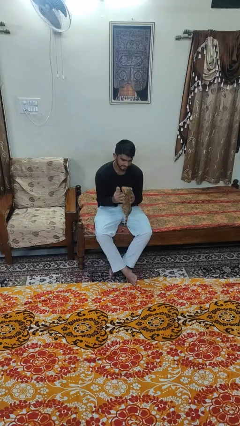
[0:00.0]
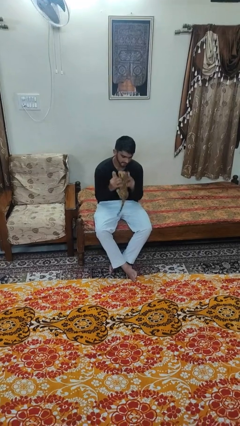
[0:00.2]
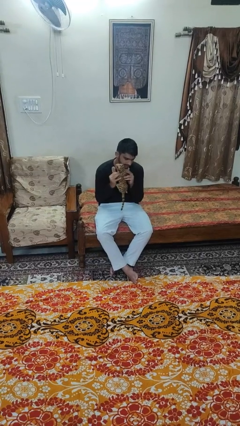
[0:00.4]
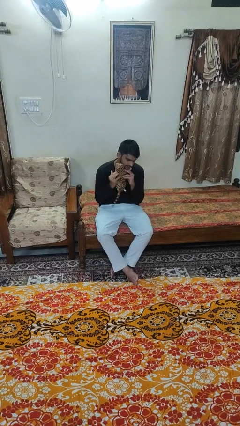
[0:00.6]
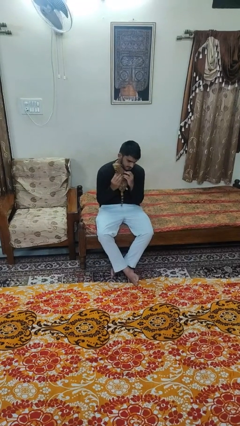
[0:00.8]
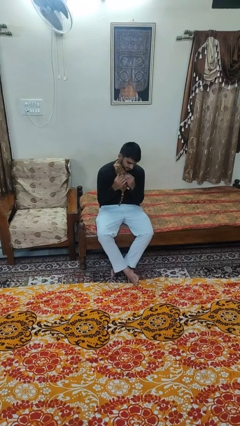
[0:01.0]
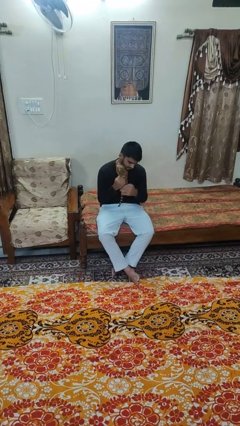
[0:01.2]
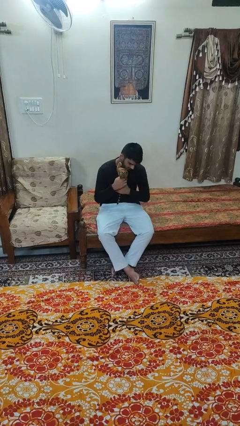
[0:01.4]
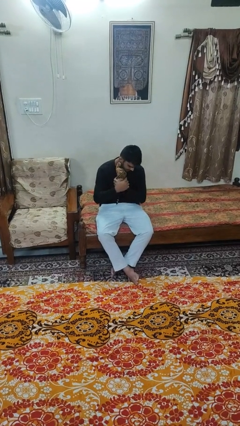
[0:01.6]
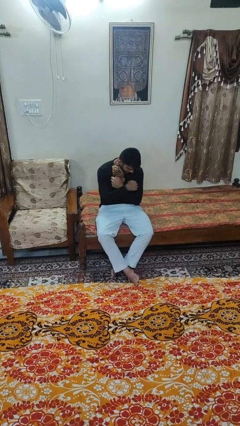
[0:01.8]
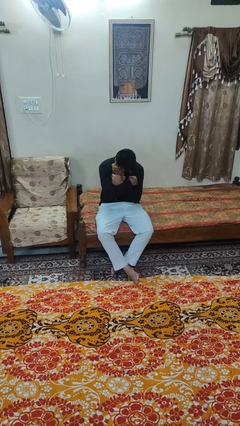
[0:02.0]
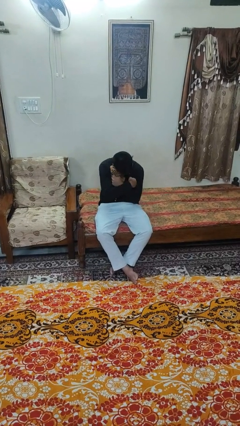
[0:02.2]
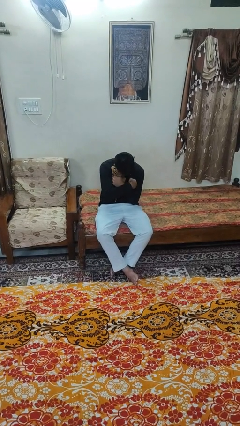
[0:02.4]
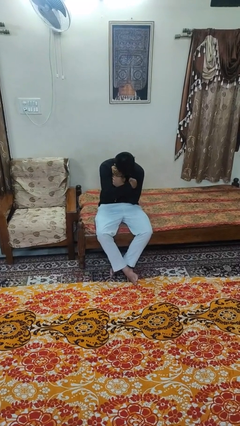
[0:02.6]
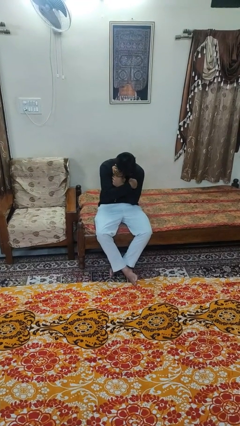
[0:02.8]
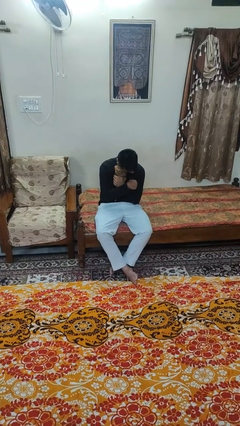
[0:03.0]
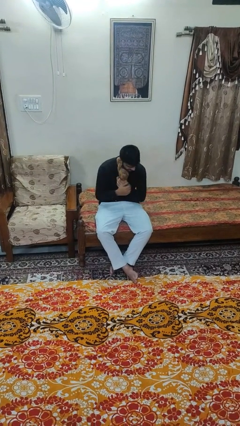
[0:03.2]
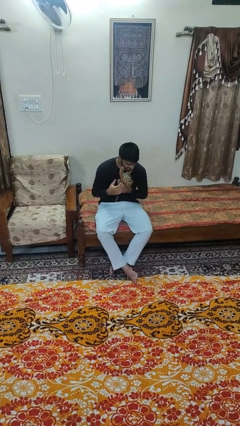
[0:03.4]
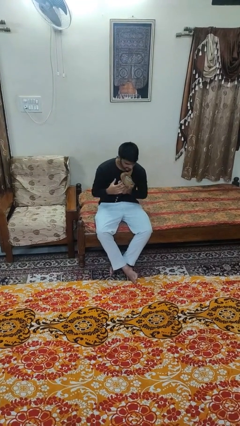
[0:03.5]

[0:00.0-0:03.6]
person hugs stuffed animal

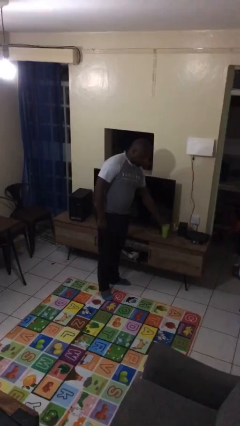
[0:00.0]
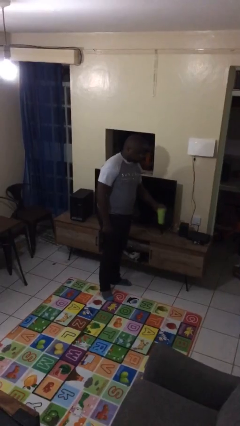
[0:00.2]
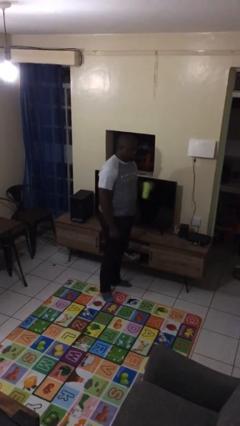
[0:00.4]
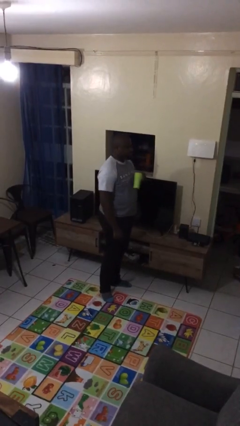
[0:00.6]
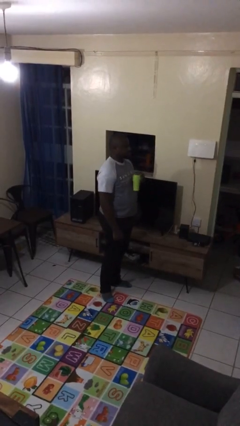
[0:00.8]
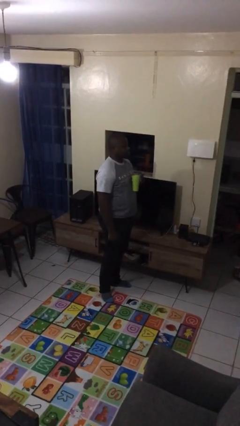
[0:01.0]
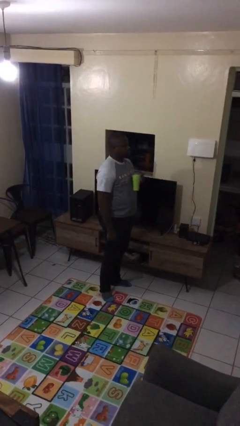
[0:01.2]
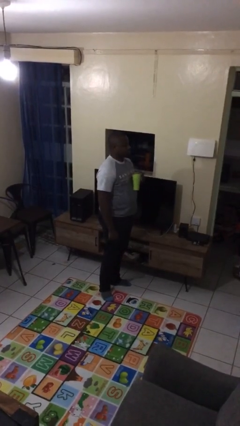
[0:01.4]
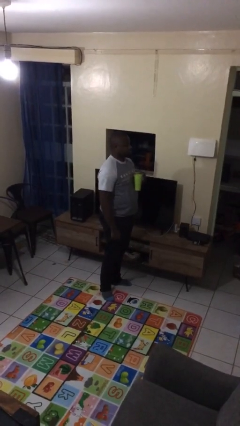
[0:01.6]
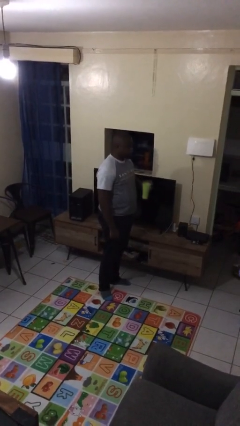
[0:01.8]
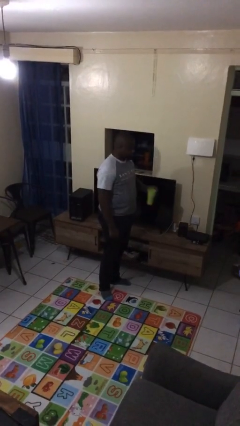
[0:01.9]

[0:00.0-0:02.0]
person picks up object from countertop

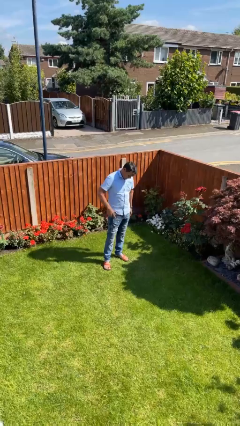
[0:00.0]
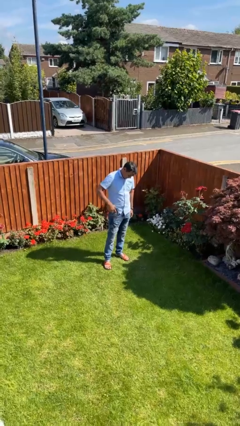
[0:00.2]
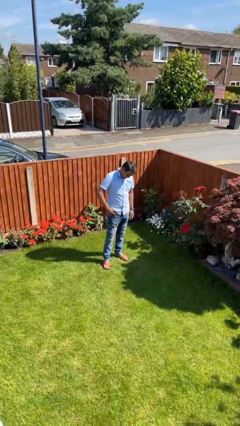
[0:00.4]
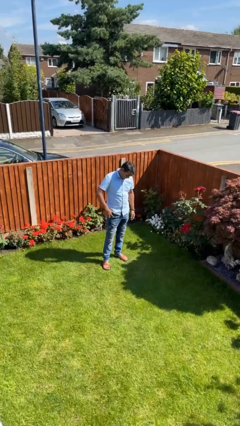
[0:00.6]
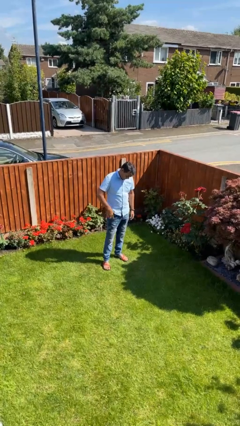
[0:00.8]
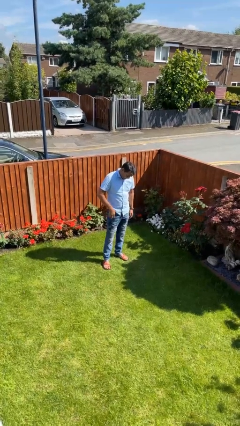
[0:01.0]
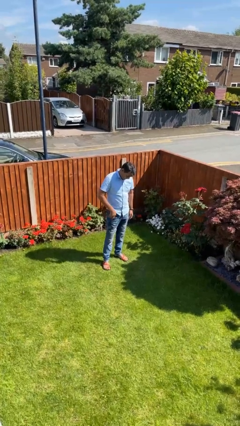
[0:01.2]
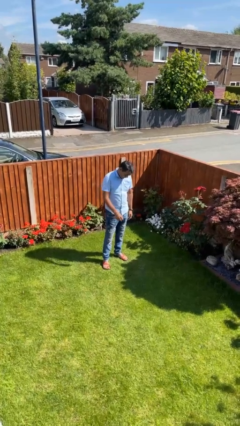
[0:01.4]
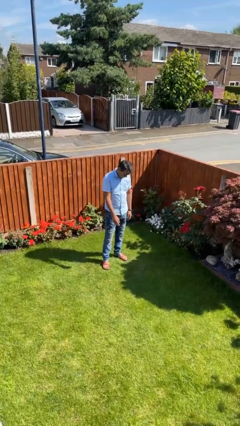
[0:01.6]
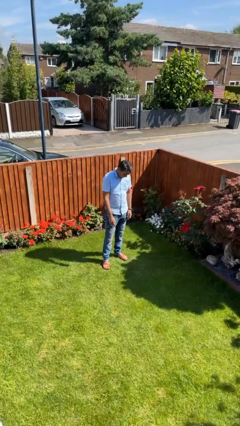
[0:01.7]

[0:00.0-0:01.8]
person puts phone into pocket

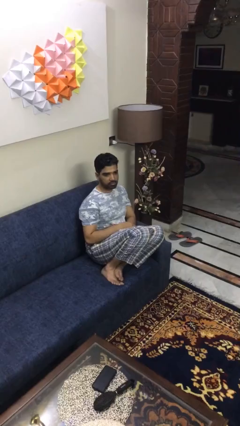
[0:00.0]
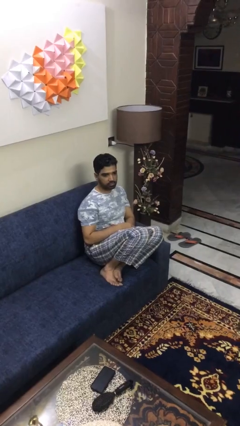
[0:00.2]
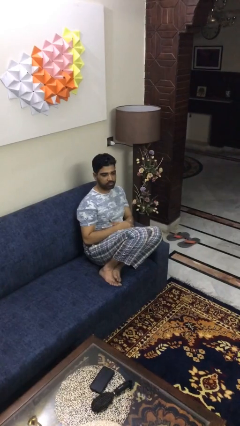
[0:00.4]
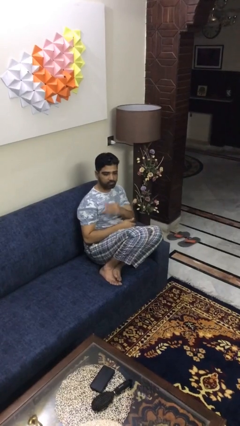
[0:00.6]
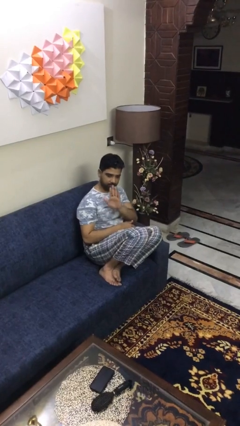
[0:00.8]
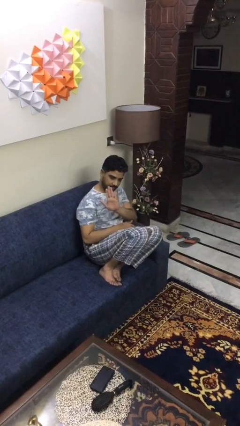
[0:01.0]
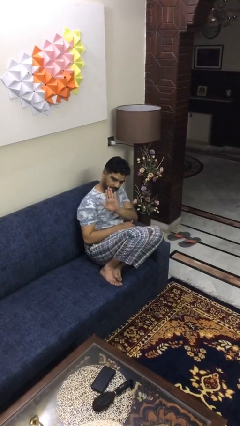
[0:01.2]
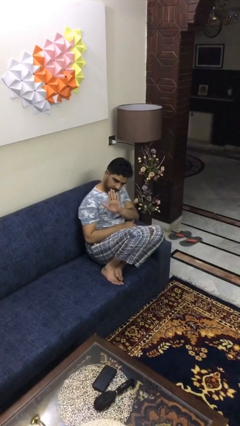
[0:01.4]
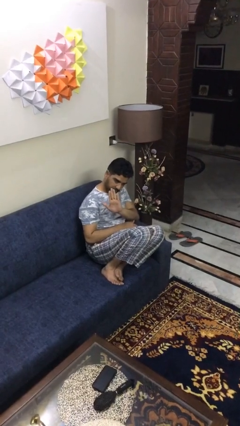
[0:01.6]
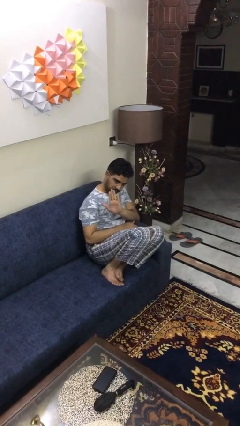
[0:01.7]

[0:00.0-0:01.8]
person gestures stop

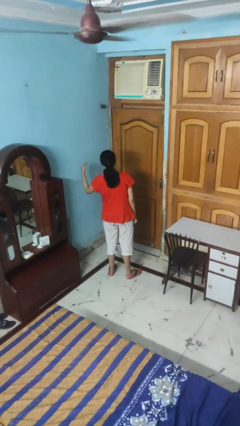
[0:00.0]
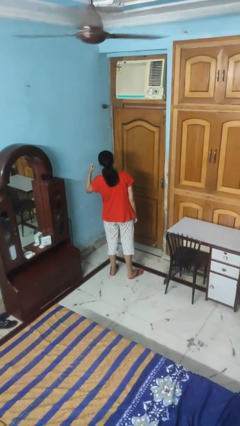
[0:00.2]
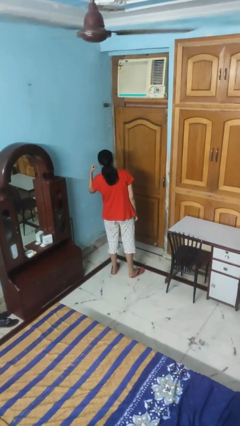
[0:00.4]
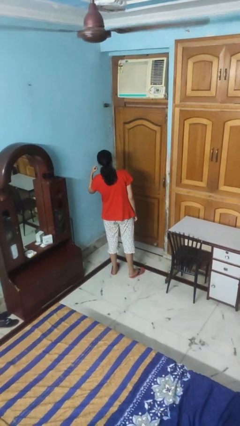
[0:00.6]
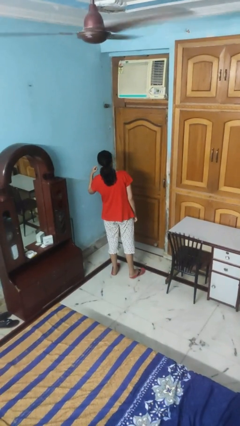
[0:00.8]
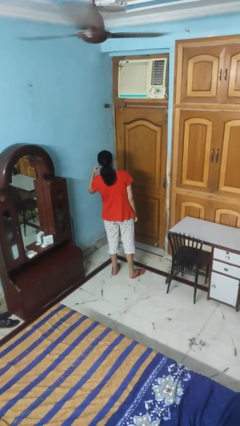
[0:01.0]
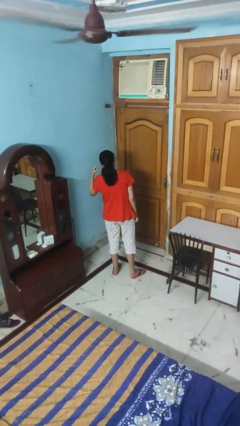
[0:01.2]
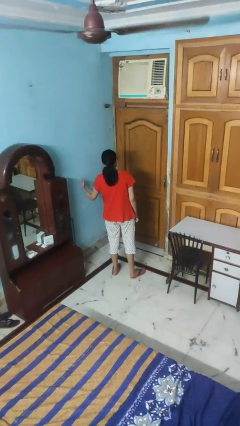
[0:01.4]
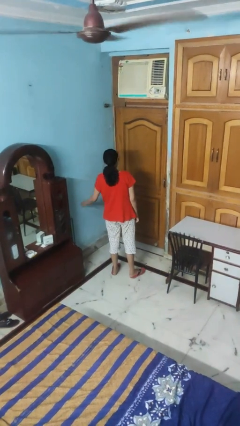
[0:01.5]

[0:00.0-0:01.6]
person gestures listen closely

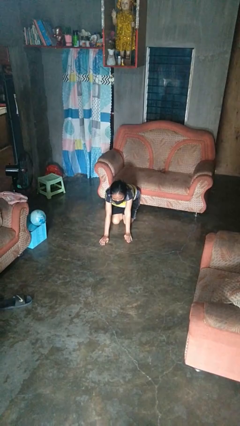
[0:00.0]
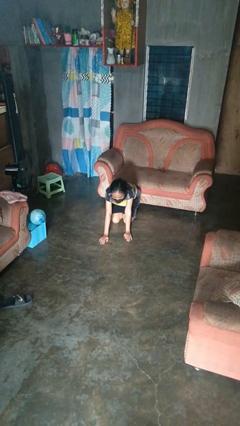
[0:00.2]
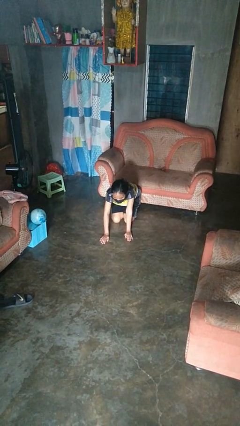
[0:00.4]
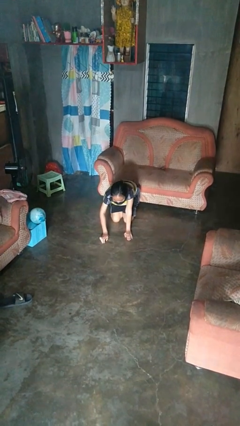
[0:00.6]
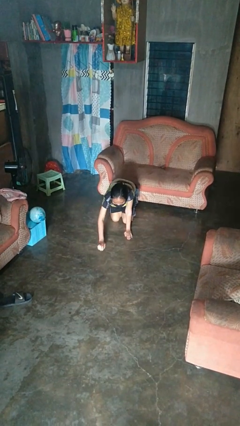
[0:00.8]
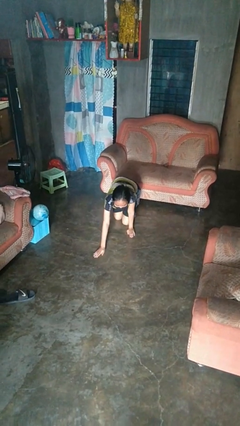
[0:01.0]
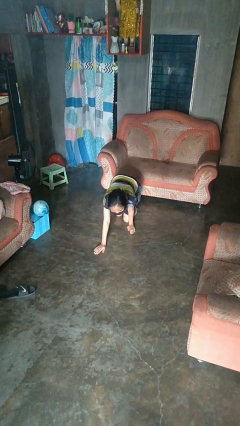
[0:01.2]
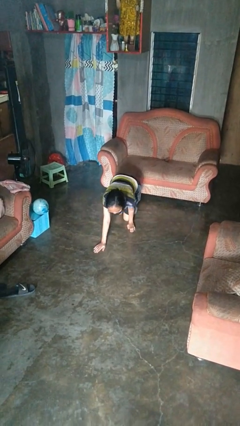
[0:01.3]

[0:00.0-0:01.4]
person crawls

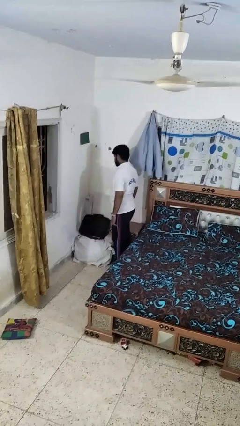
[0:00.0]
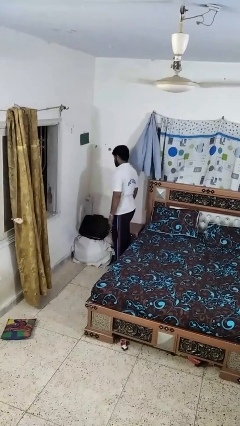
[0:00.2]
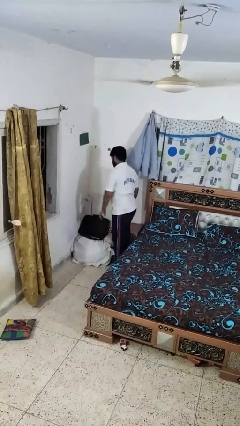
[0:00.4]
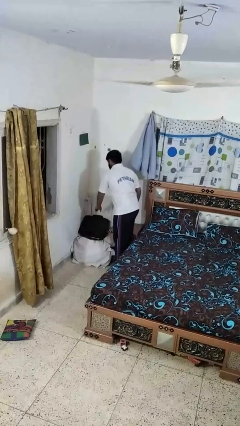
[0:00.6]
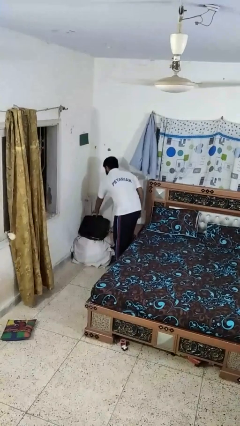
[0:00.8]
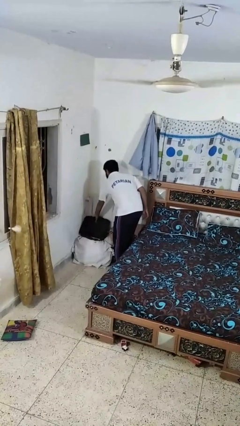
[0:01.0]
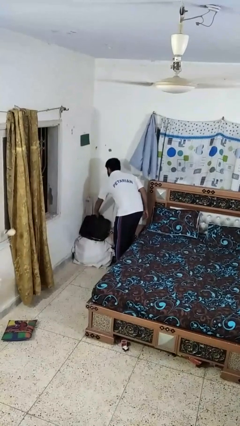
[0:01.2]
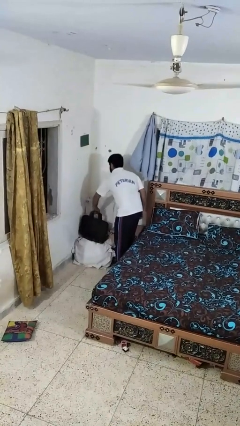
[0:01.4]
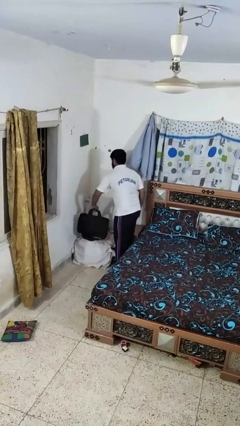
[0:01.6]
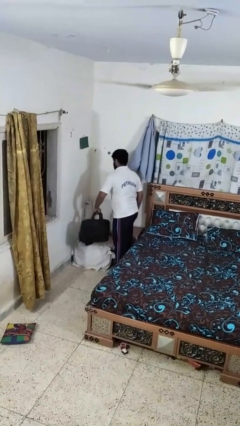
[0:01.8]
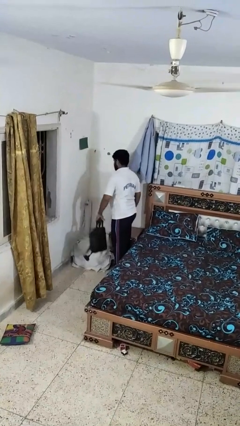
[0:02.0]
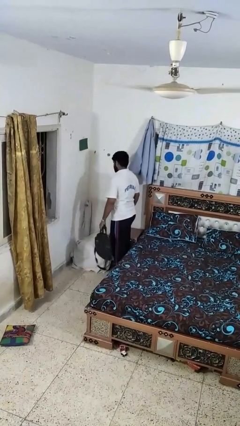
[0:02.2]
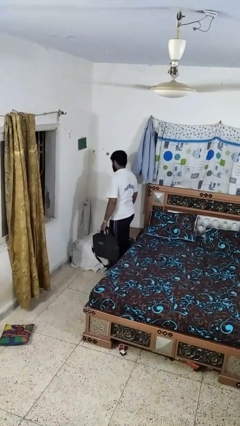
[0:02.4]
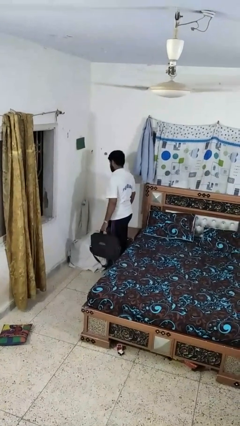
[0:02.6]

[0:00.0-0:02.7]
person picks up object from couch

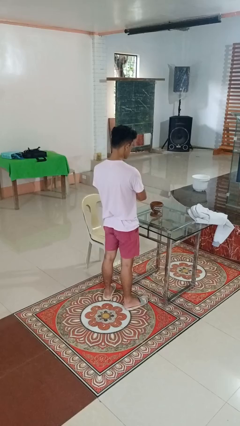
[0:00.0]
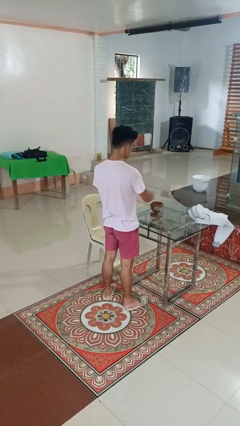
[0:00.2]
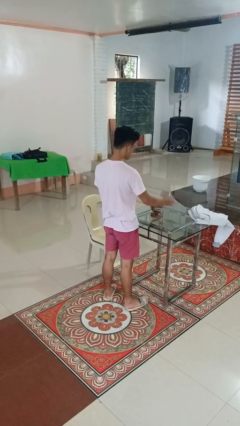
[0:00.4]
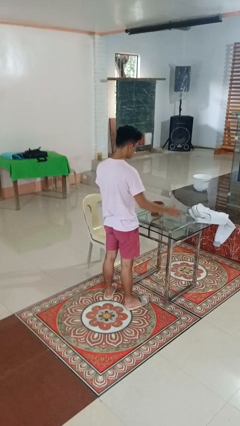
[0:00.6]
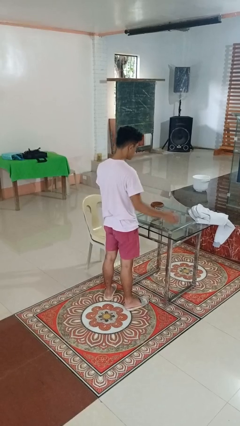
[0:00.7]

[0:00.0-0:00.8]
person waves hand over object

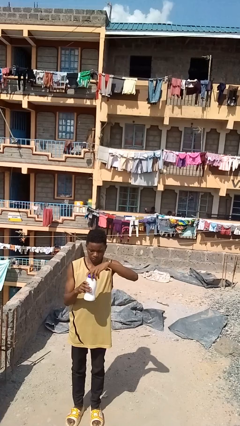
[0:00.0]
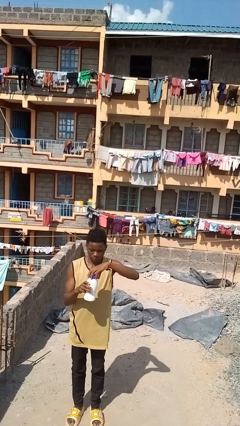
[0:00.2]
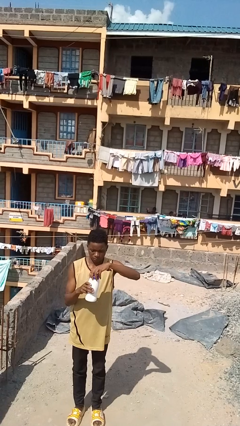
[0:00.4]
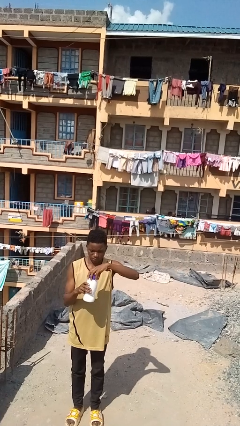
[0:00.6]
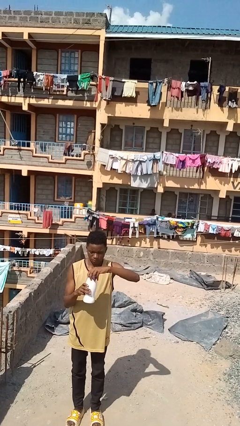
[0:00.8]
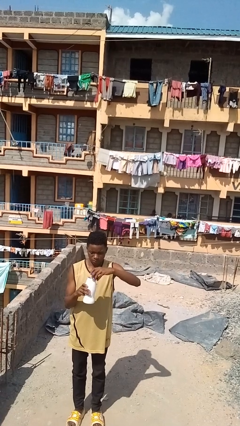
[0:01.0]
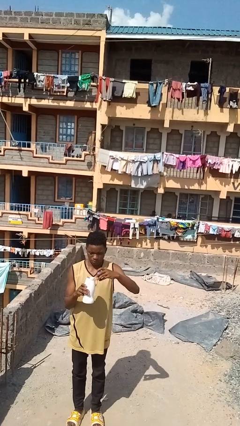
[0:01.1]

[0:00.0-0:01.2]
person opens beverage can
